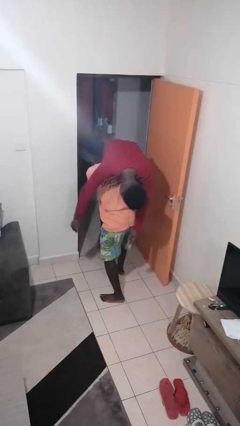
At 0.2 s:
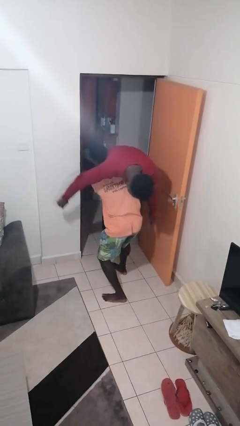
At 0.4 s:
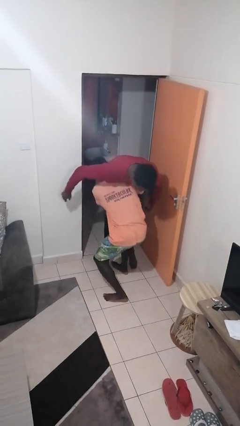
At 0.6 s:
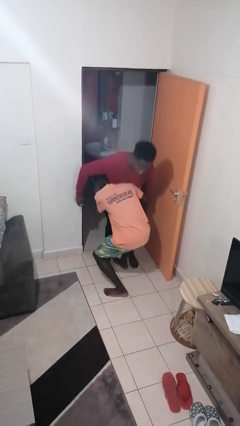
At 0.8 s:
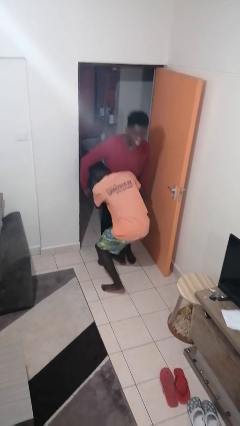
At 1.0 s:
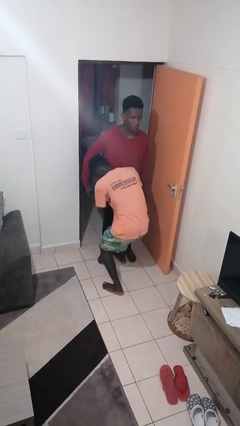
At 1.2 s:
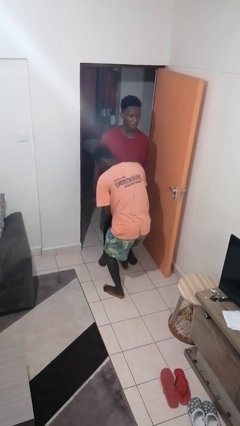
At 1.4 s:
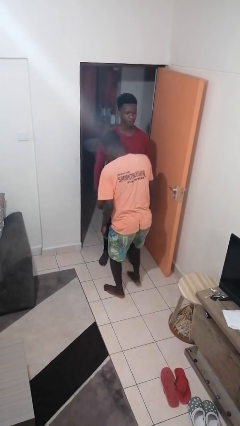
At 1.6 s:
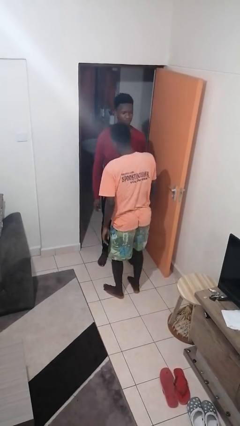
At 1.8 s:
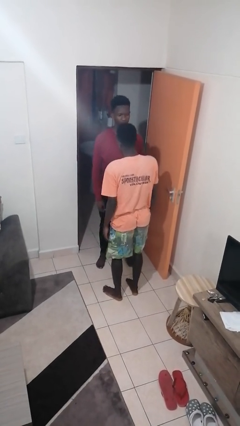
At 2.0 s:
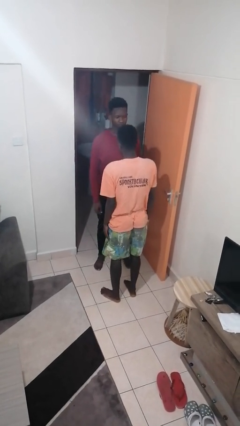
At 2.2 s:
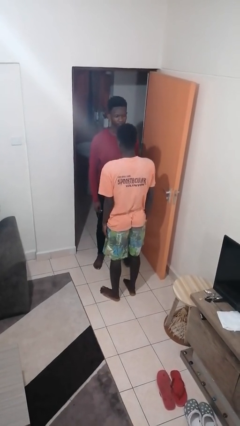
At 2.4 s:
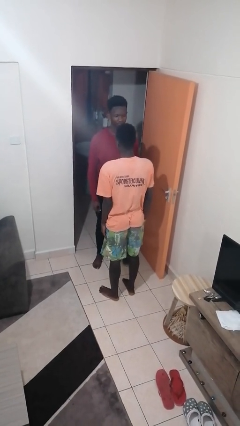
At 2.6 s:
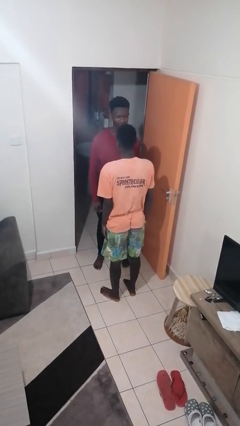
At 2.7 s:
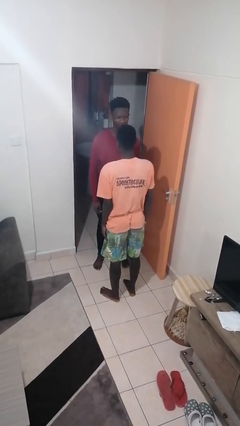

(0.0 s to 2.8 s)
person puts down person

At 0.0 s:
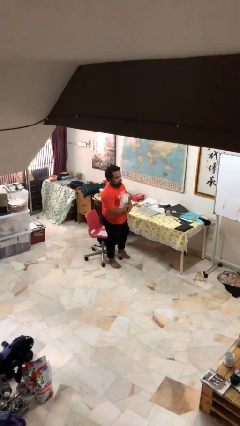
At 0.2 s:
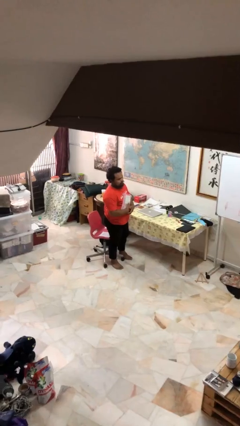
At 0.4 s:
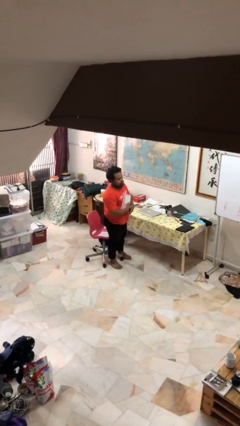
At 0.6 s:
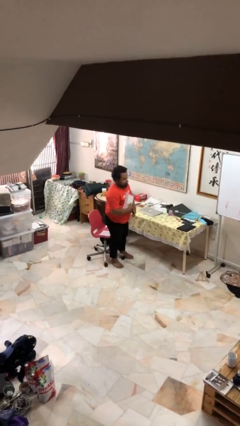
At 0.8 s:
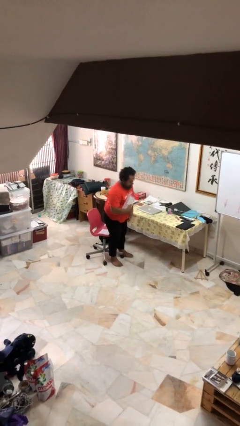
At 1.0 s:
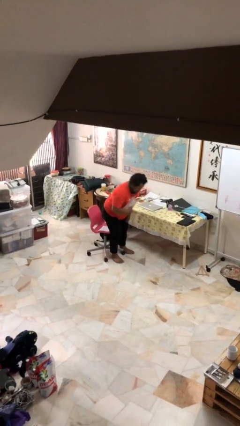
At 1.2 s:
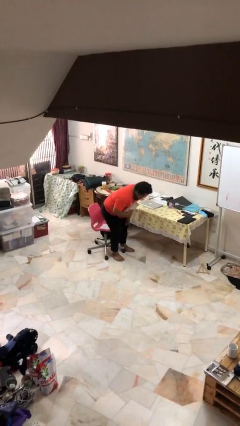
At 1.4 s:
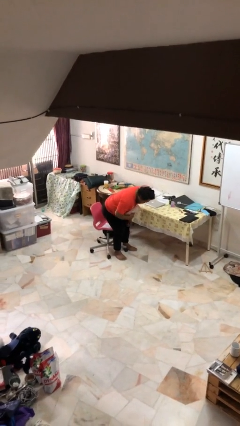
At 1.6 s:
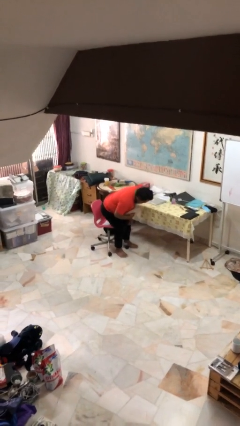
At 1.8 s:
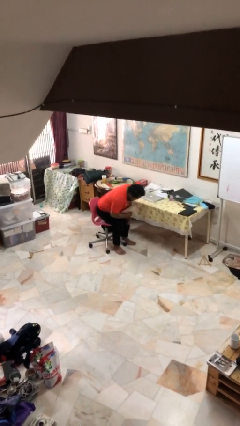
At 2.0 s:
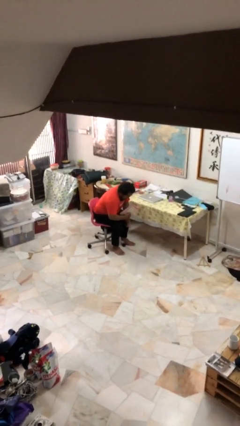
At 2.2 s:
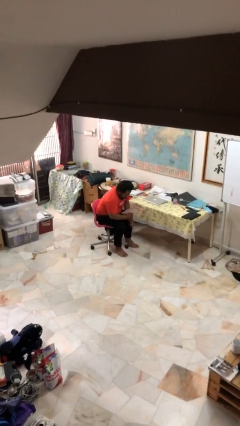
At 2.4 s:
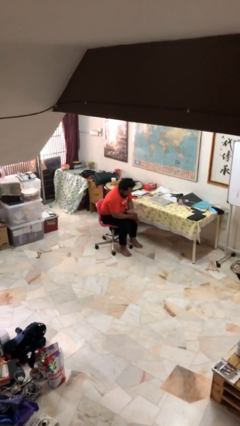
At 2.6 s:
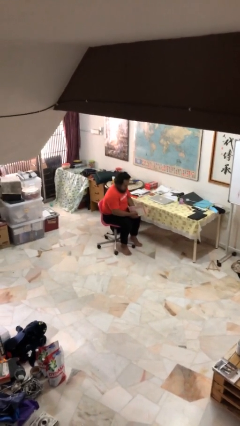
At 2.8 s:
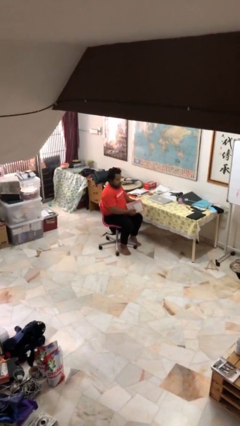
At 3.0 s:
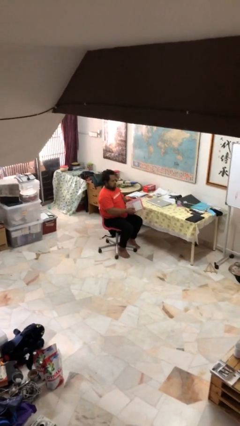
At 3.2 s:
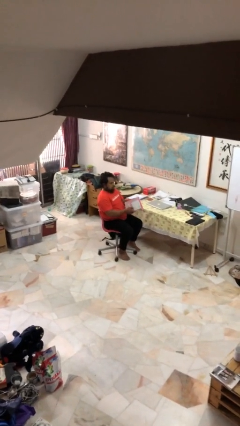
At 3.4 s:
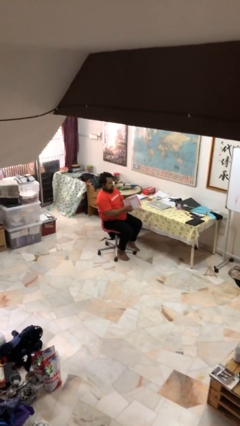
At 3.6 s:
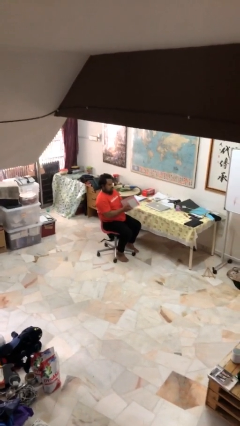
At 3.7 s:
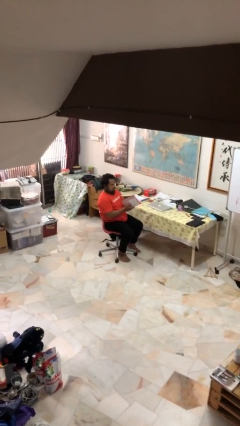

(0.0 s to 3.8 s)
person sits down

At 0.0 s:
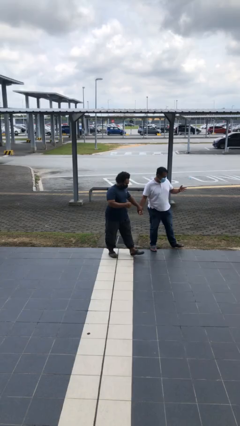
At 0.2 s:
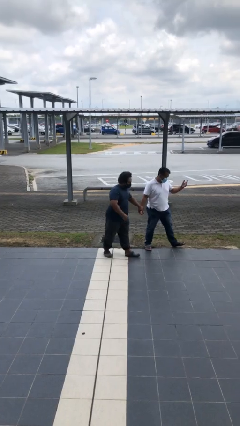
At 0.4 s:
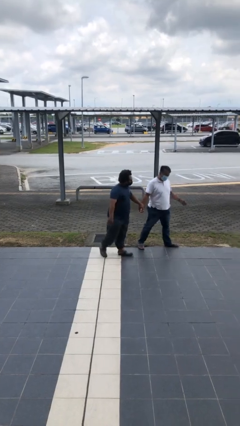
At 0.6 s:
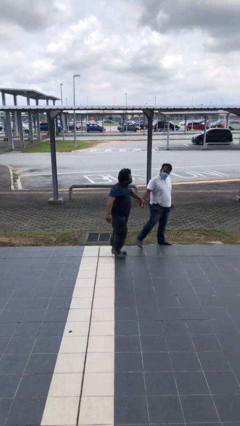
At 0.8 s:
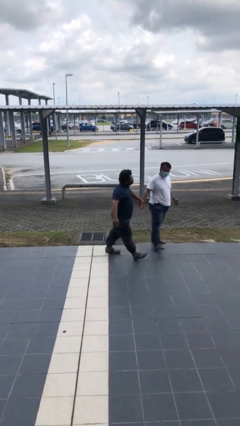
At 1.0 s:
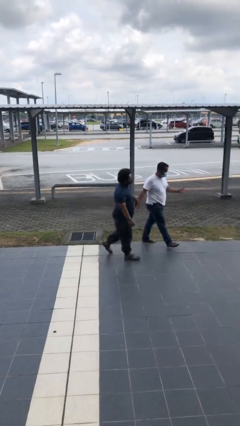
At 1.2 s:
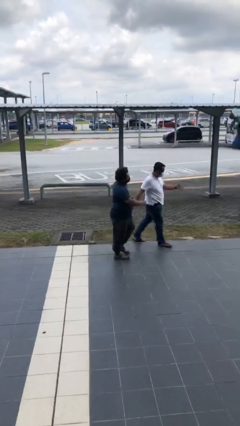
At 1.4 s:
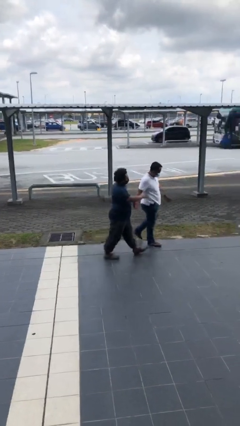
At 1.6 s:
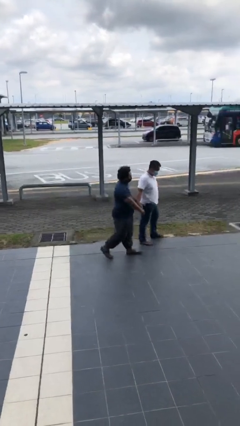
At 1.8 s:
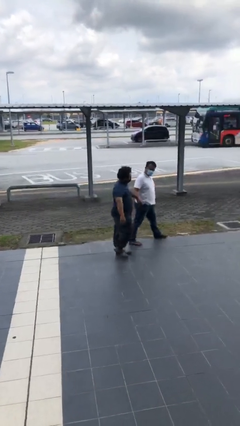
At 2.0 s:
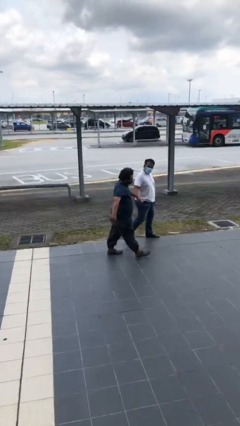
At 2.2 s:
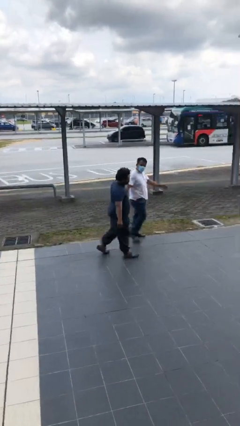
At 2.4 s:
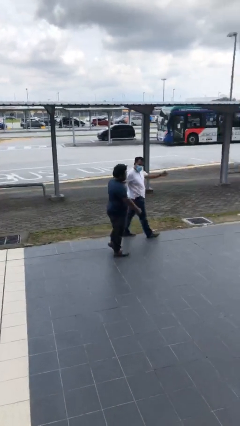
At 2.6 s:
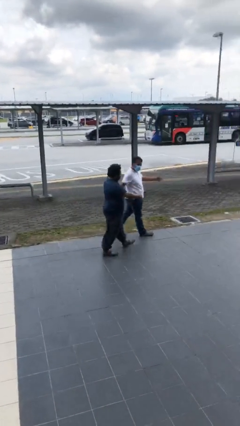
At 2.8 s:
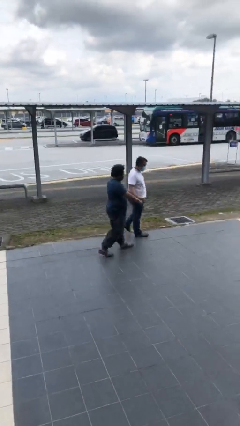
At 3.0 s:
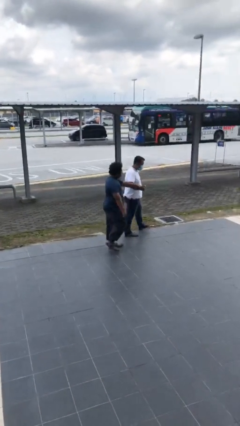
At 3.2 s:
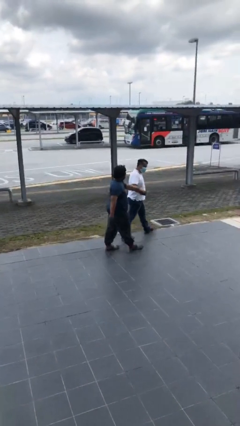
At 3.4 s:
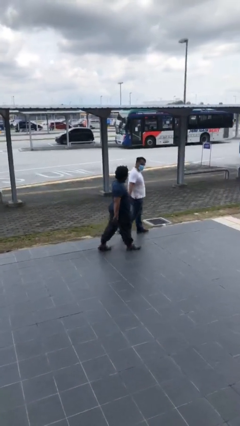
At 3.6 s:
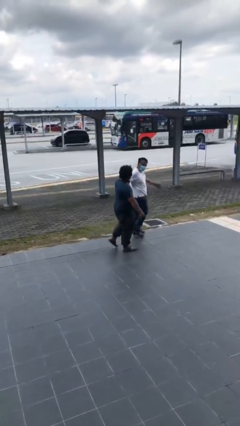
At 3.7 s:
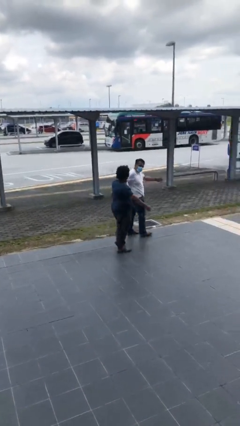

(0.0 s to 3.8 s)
person holds hand

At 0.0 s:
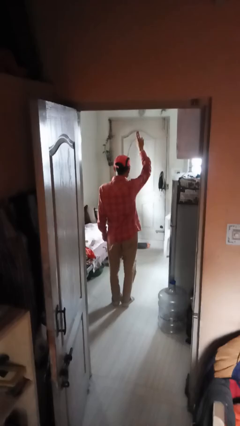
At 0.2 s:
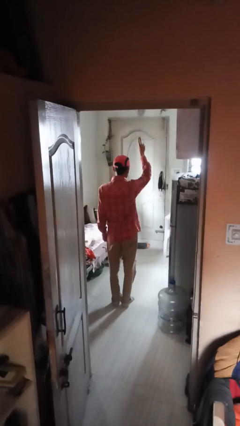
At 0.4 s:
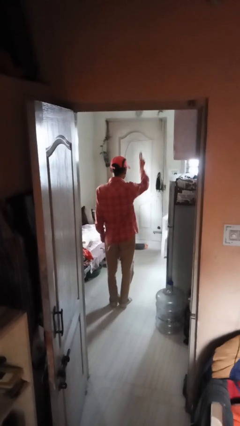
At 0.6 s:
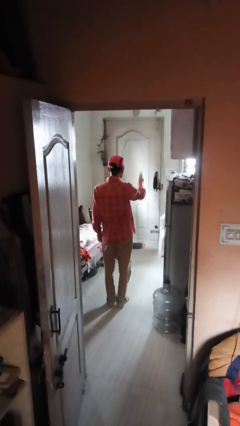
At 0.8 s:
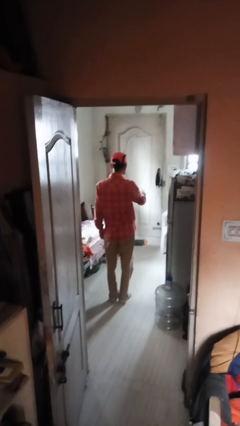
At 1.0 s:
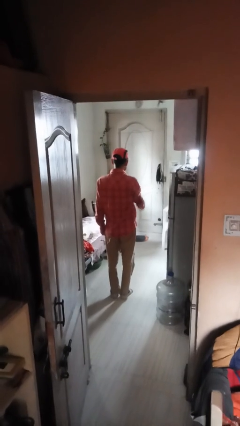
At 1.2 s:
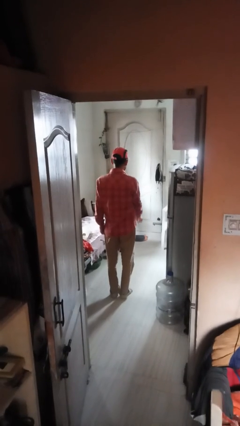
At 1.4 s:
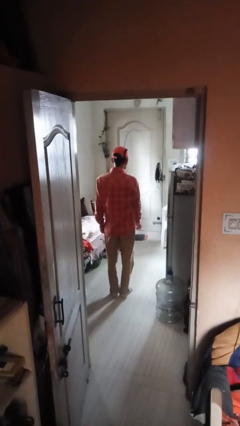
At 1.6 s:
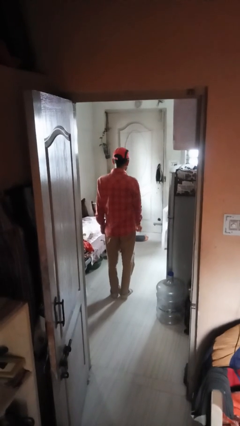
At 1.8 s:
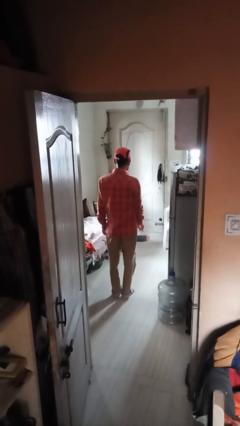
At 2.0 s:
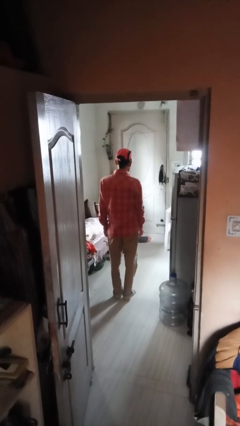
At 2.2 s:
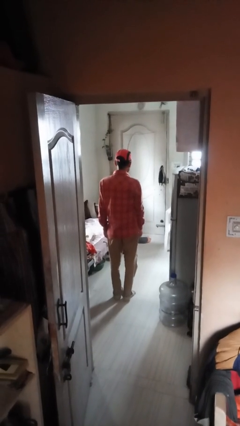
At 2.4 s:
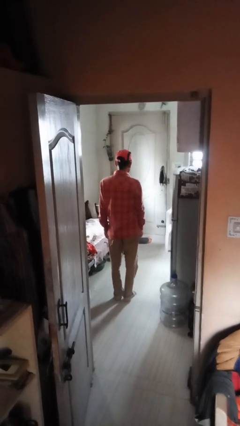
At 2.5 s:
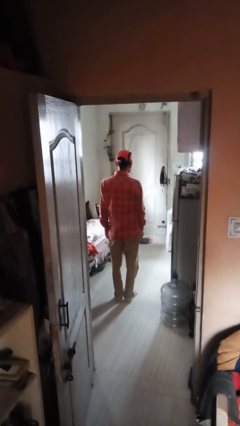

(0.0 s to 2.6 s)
person gestures swipe down

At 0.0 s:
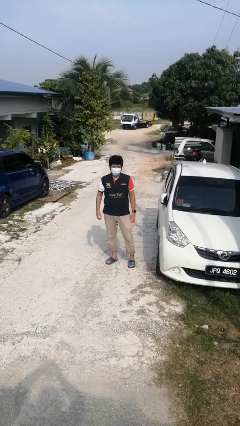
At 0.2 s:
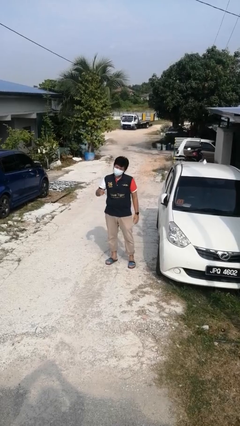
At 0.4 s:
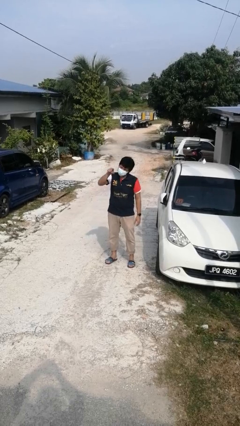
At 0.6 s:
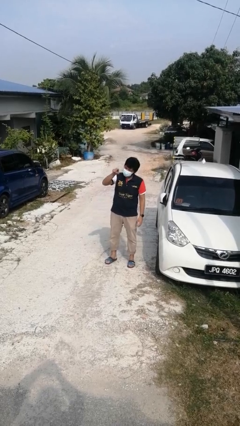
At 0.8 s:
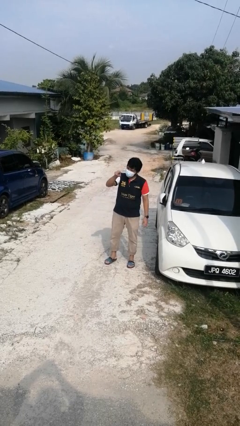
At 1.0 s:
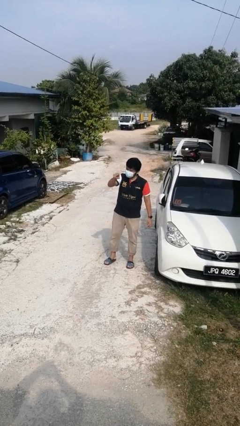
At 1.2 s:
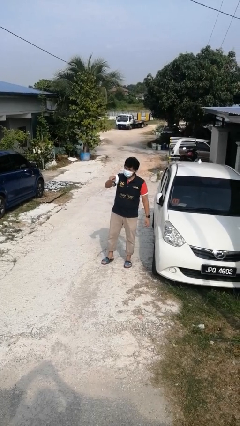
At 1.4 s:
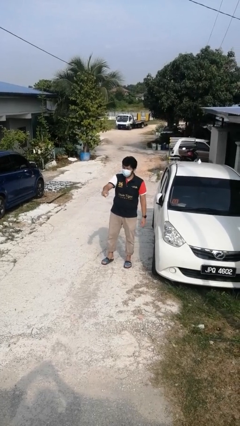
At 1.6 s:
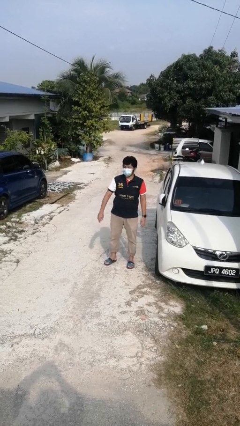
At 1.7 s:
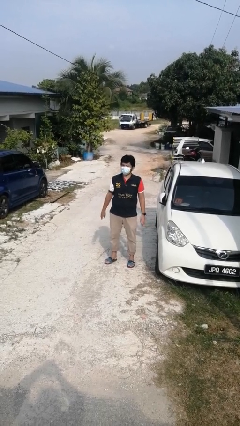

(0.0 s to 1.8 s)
person points at person

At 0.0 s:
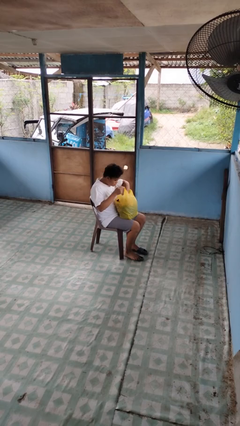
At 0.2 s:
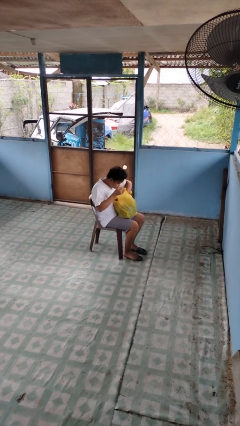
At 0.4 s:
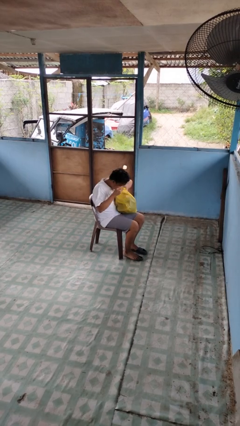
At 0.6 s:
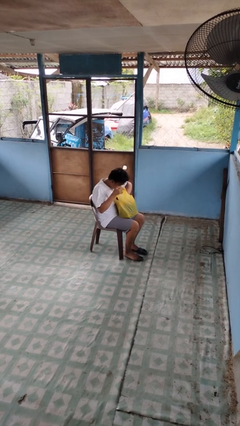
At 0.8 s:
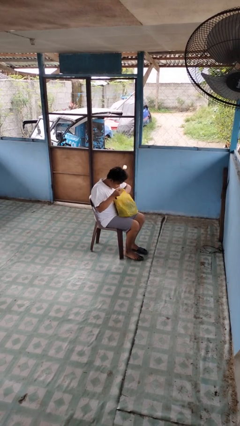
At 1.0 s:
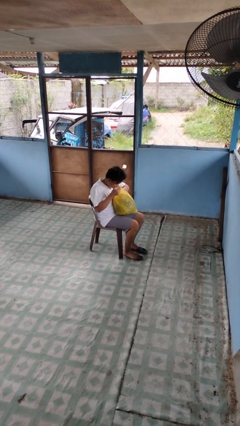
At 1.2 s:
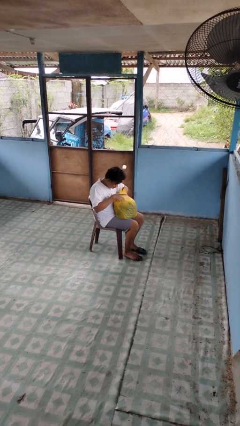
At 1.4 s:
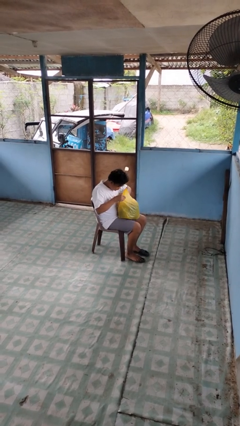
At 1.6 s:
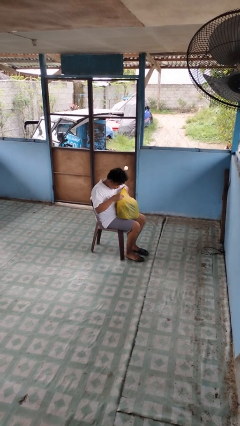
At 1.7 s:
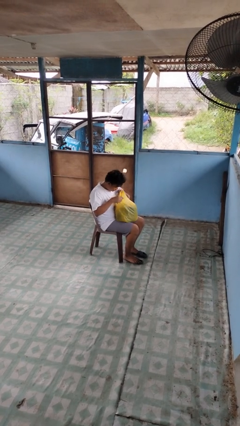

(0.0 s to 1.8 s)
person searches in bag

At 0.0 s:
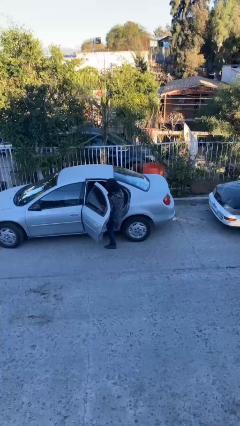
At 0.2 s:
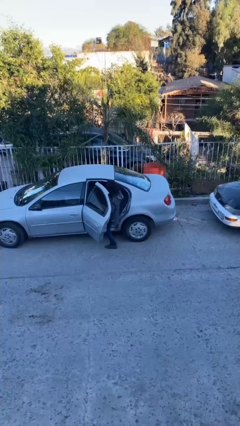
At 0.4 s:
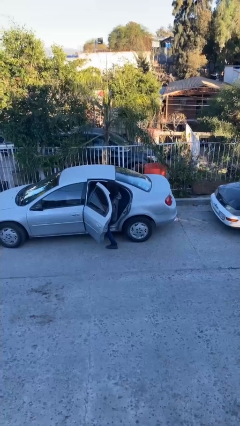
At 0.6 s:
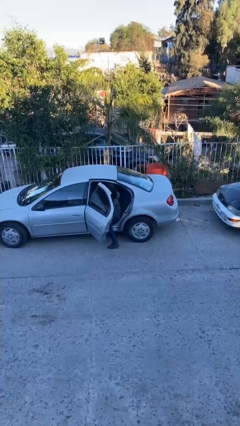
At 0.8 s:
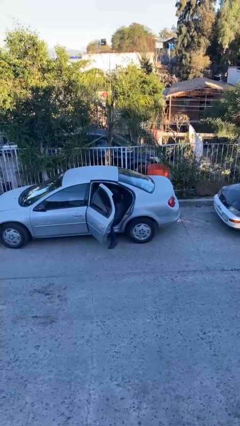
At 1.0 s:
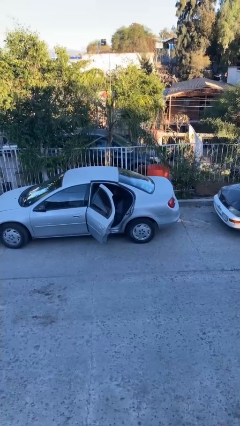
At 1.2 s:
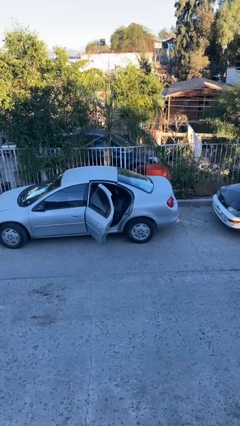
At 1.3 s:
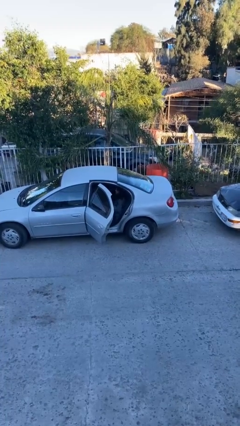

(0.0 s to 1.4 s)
person enters car
